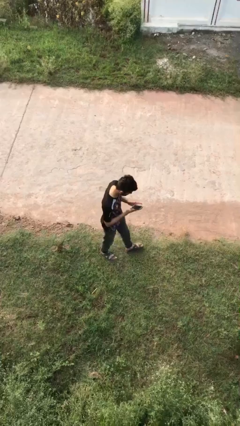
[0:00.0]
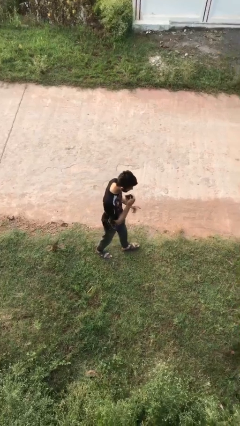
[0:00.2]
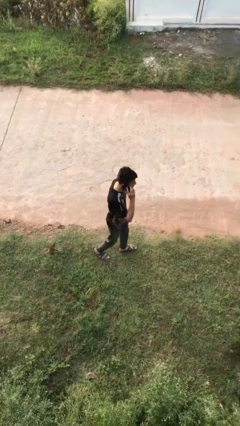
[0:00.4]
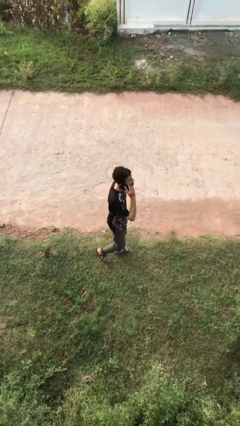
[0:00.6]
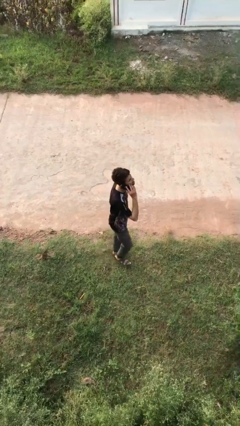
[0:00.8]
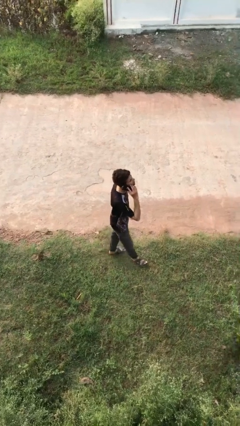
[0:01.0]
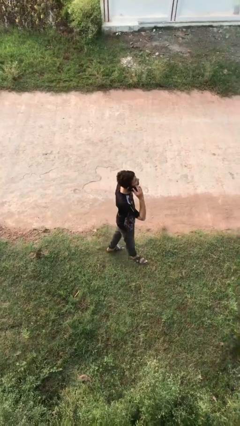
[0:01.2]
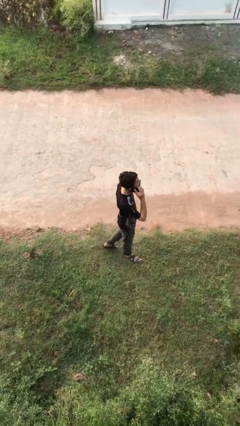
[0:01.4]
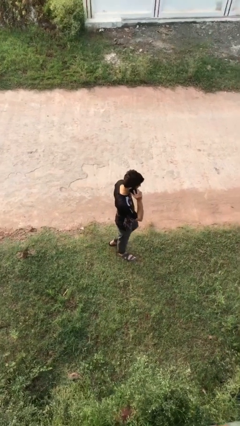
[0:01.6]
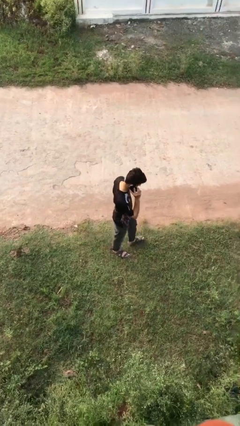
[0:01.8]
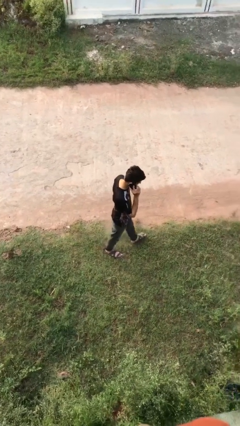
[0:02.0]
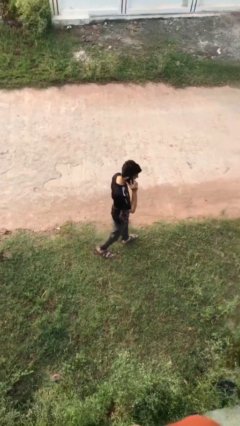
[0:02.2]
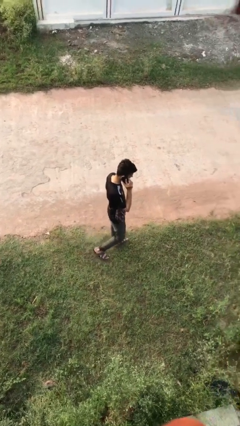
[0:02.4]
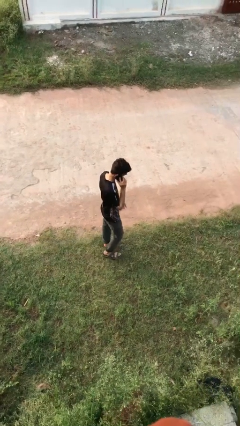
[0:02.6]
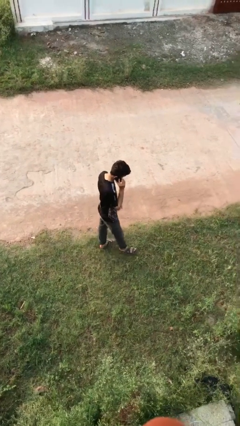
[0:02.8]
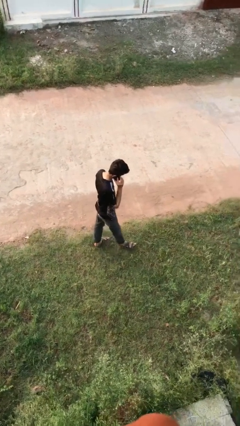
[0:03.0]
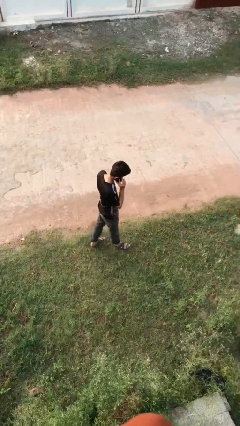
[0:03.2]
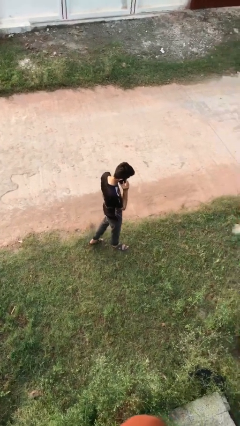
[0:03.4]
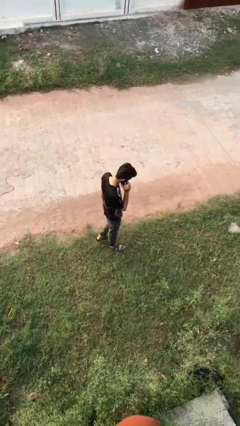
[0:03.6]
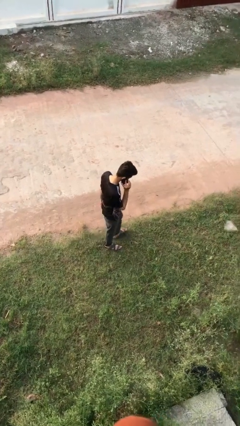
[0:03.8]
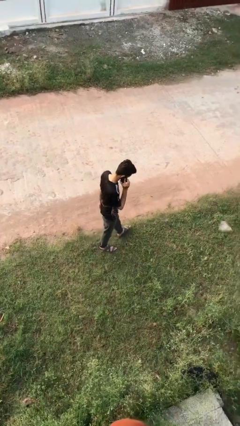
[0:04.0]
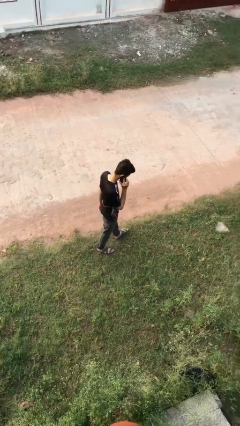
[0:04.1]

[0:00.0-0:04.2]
person talks on phone

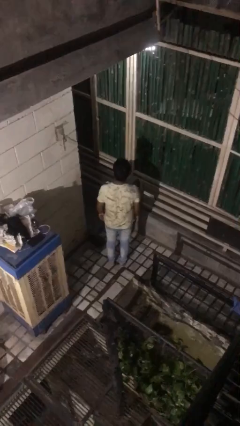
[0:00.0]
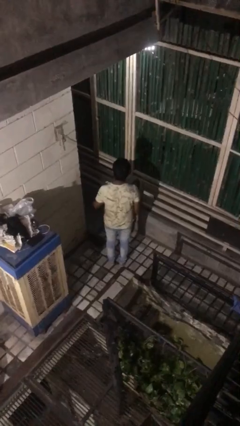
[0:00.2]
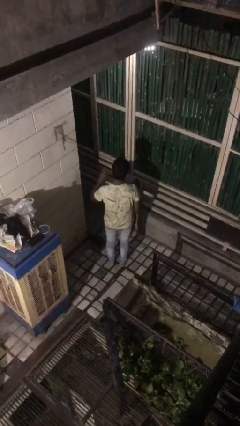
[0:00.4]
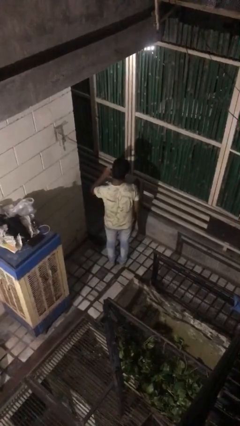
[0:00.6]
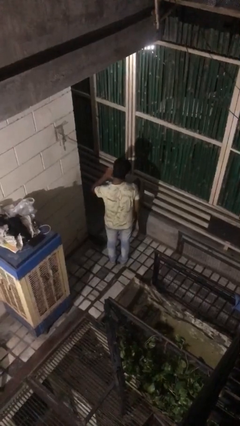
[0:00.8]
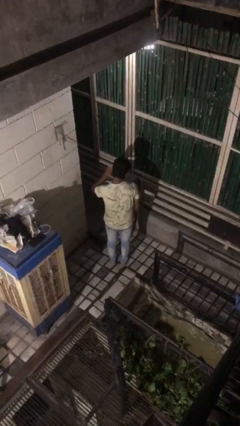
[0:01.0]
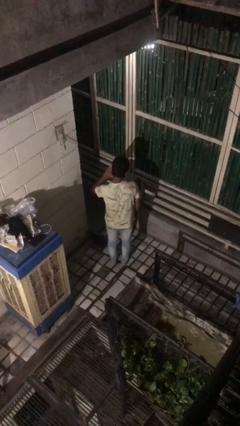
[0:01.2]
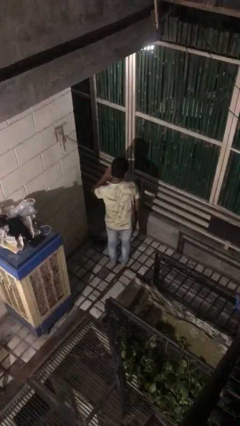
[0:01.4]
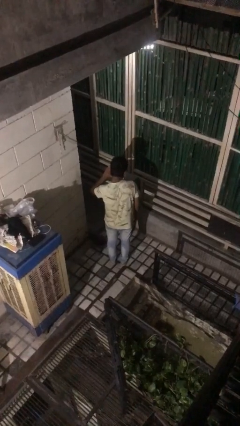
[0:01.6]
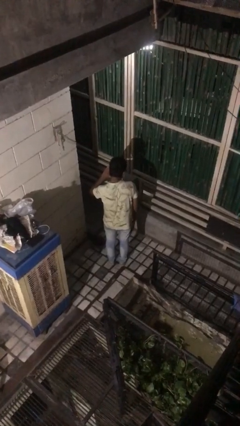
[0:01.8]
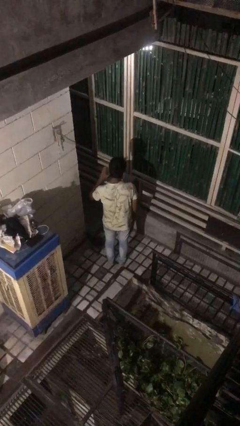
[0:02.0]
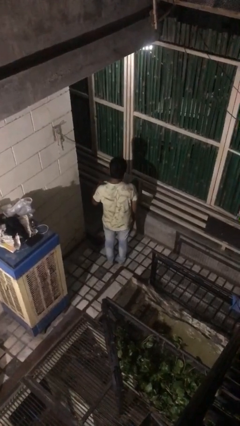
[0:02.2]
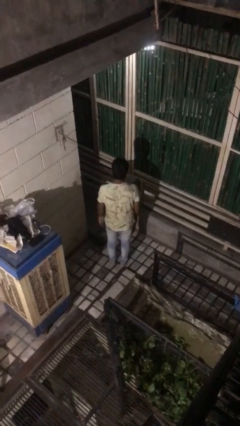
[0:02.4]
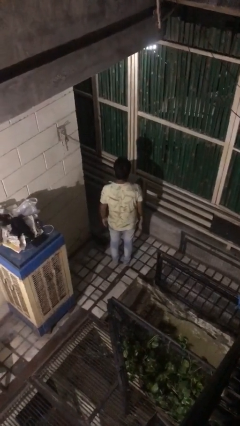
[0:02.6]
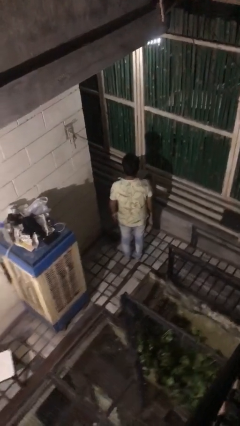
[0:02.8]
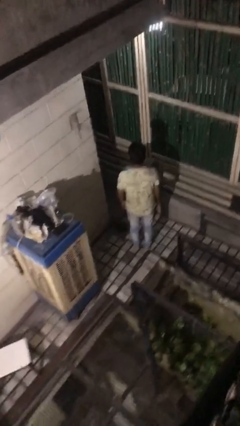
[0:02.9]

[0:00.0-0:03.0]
person gestures listen closely

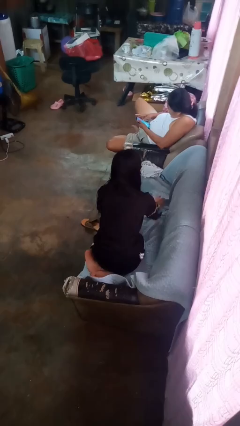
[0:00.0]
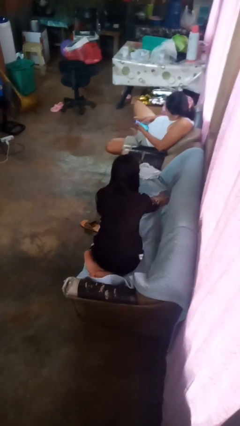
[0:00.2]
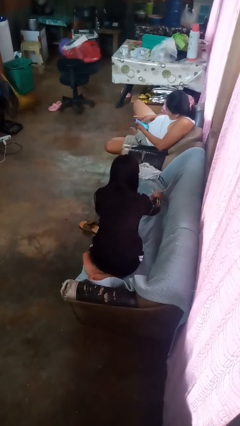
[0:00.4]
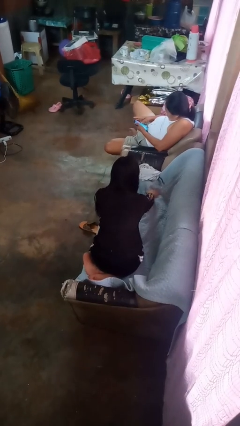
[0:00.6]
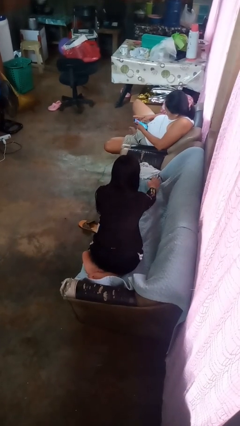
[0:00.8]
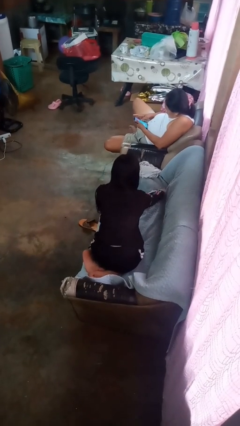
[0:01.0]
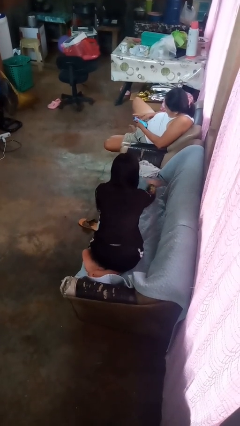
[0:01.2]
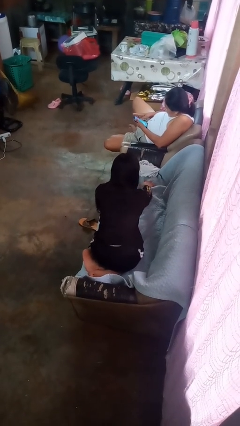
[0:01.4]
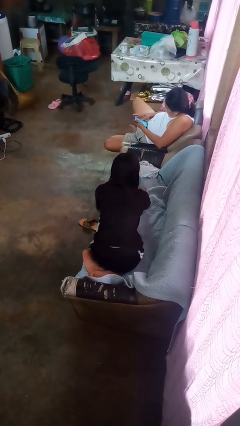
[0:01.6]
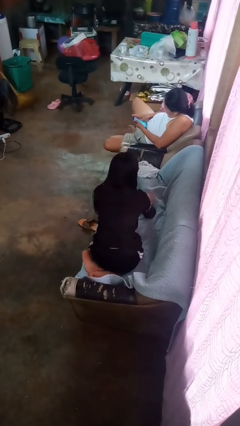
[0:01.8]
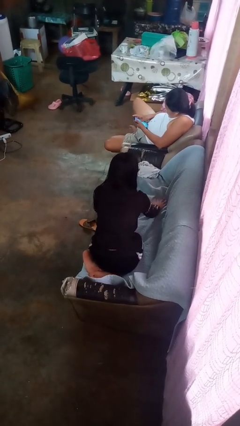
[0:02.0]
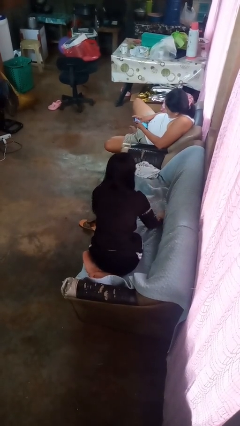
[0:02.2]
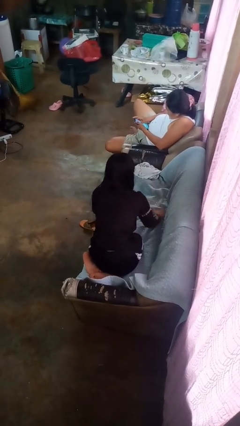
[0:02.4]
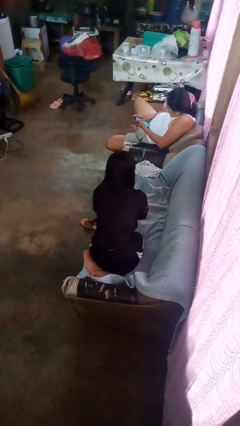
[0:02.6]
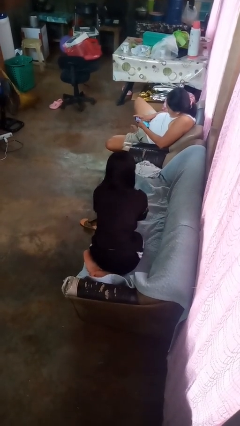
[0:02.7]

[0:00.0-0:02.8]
person searches in couch

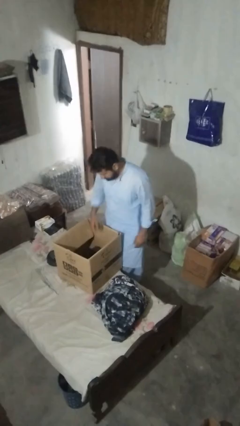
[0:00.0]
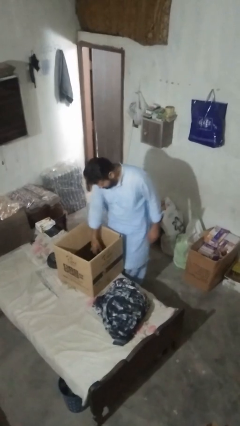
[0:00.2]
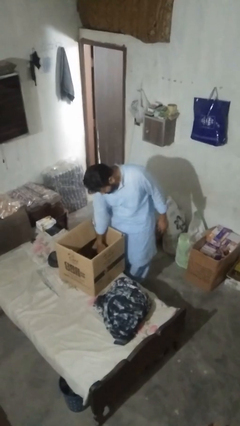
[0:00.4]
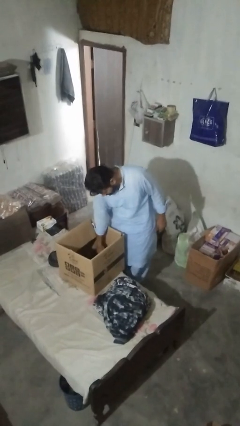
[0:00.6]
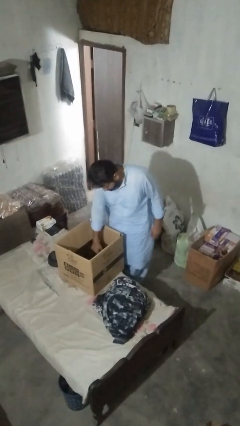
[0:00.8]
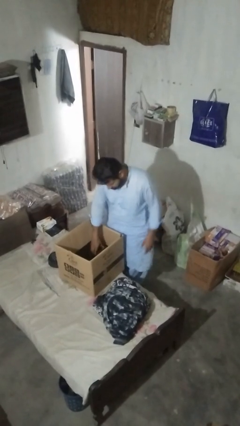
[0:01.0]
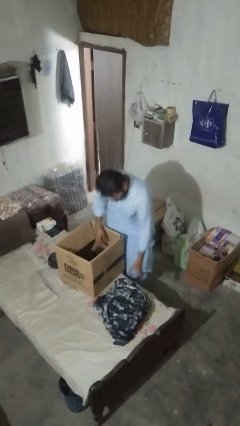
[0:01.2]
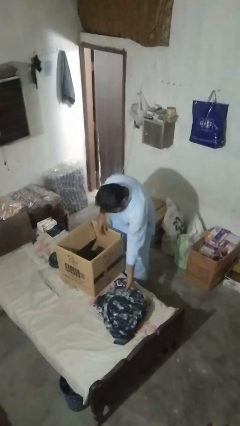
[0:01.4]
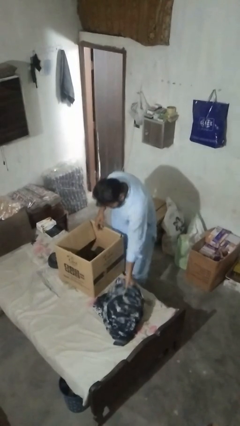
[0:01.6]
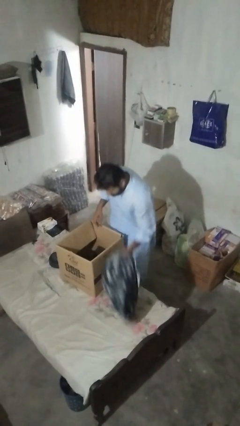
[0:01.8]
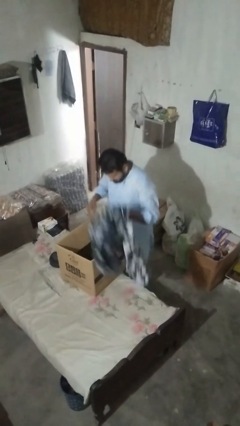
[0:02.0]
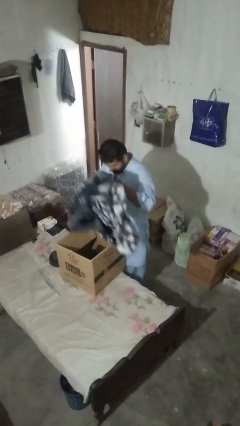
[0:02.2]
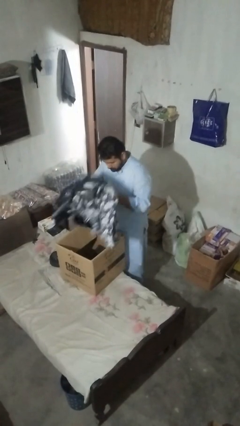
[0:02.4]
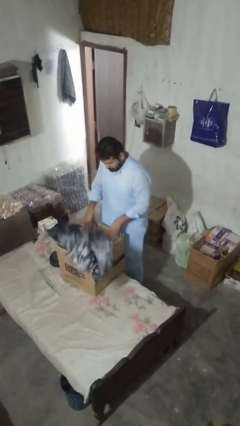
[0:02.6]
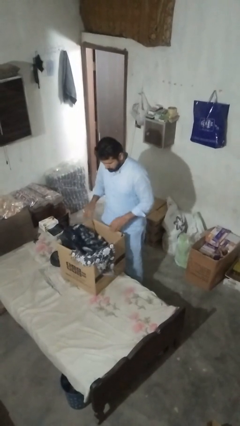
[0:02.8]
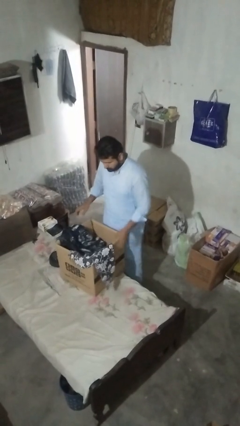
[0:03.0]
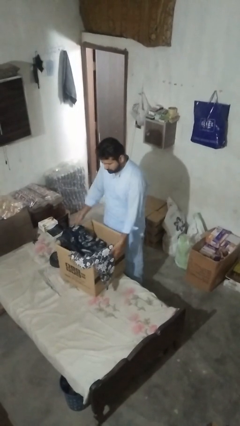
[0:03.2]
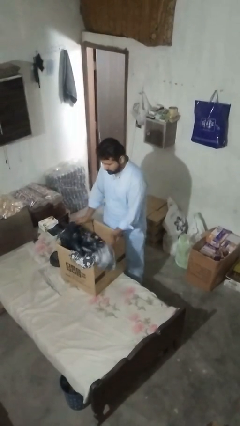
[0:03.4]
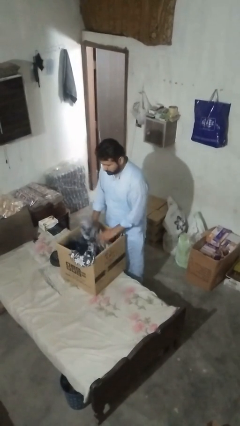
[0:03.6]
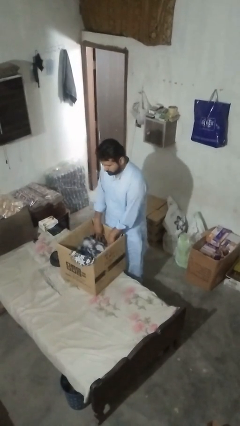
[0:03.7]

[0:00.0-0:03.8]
person loads clotheswasher

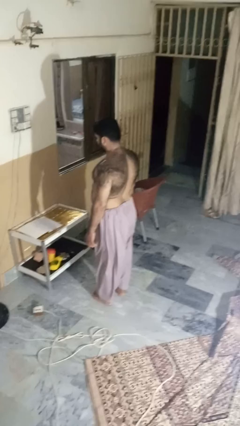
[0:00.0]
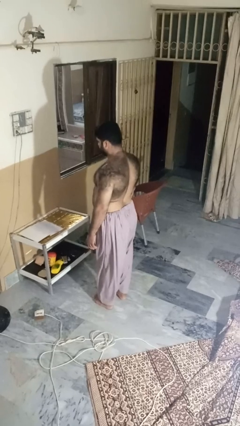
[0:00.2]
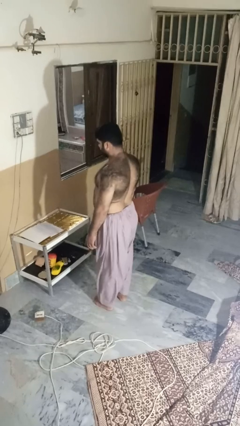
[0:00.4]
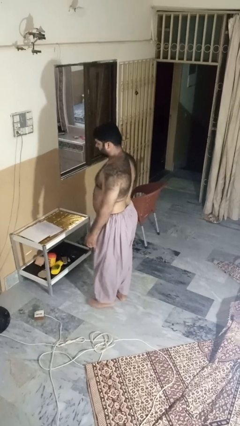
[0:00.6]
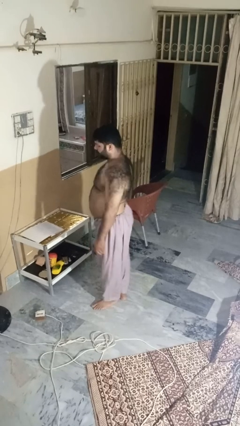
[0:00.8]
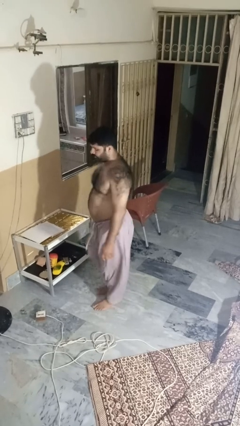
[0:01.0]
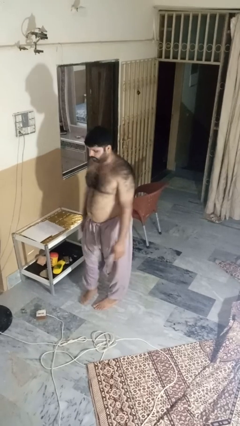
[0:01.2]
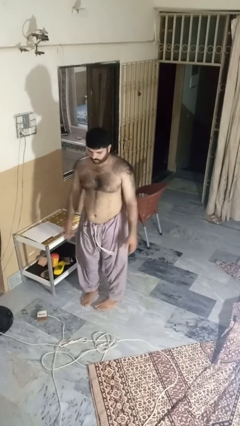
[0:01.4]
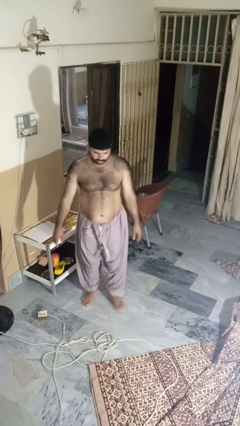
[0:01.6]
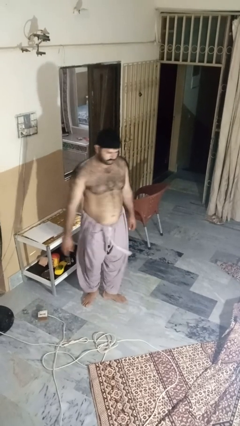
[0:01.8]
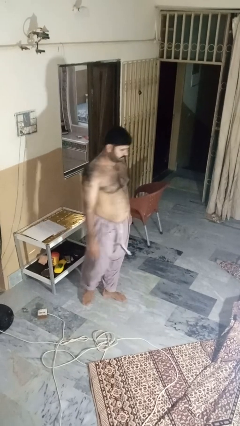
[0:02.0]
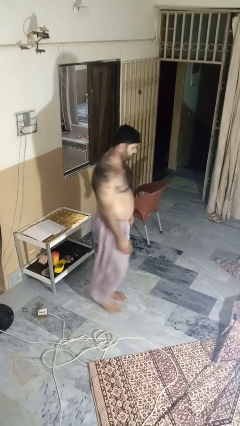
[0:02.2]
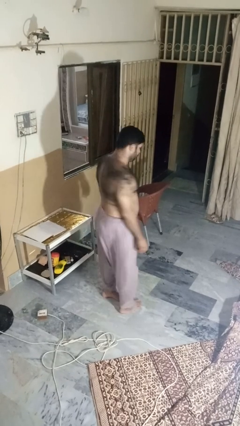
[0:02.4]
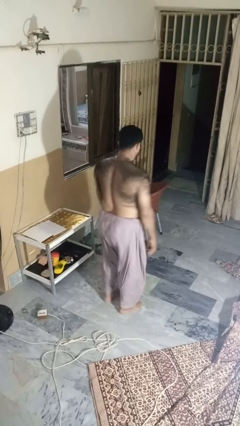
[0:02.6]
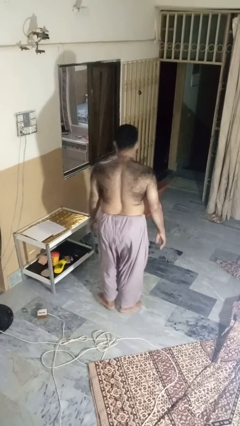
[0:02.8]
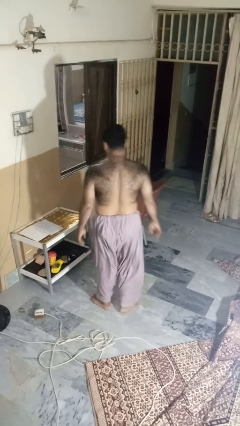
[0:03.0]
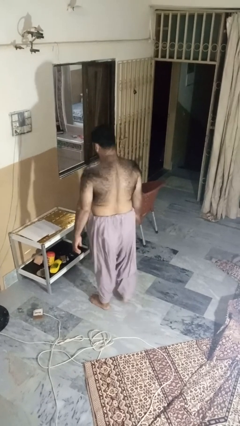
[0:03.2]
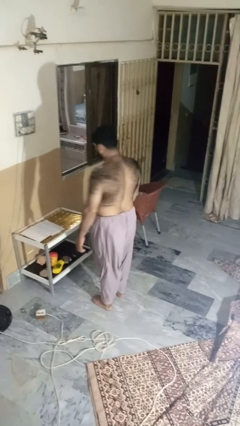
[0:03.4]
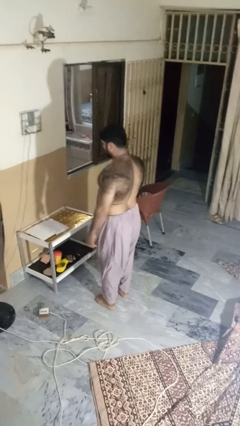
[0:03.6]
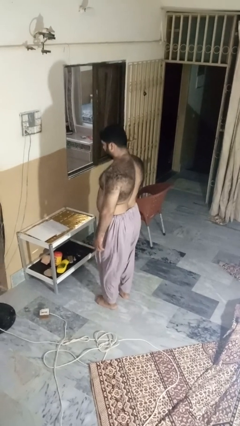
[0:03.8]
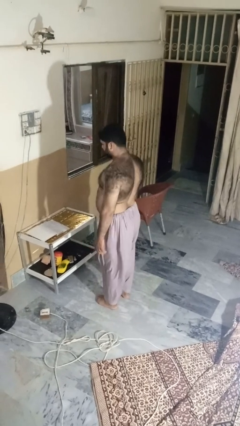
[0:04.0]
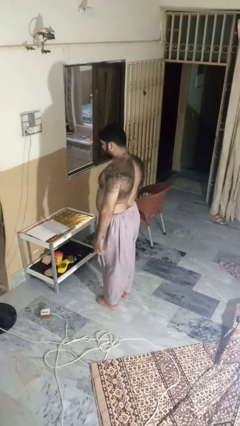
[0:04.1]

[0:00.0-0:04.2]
person twirls

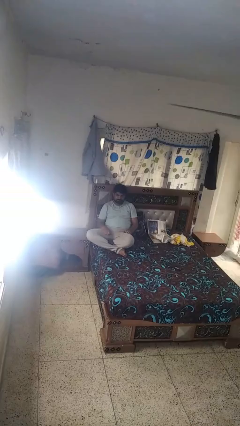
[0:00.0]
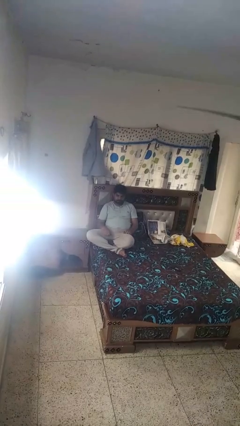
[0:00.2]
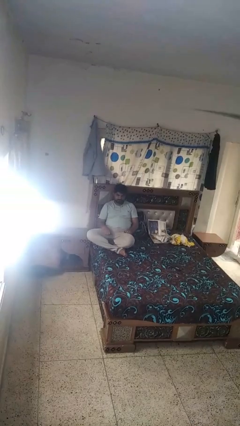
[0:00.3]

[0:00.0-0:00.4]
person gestures thumbs down
